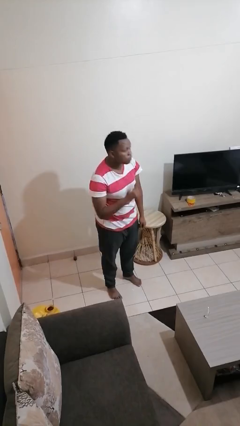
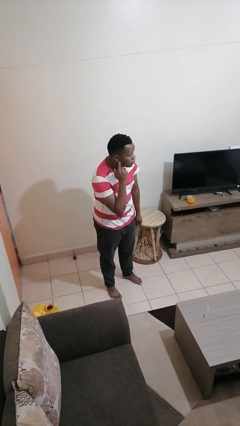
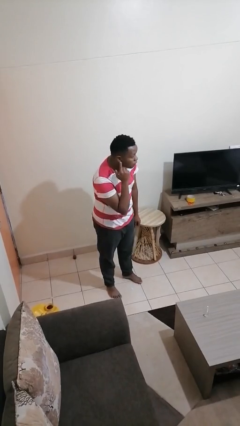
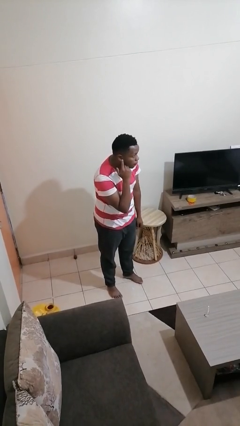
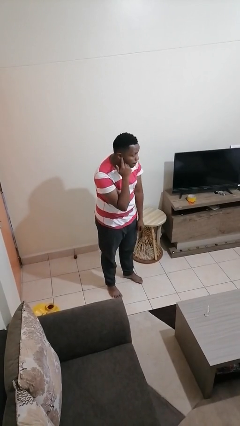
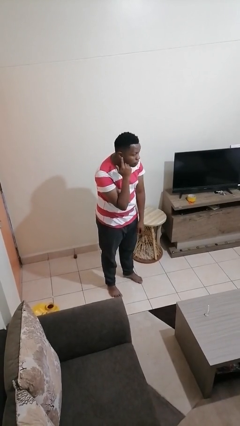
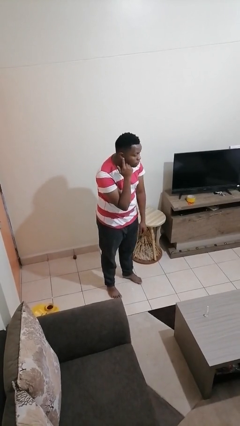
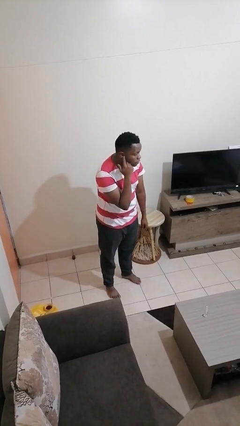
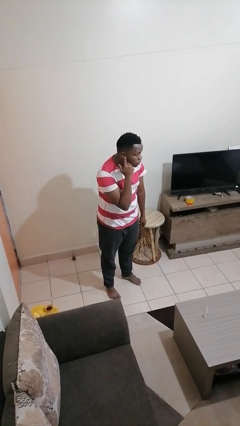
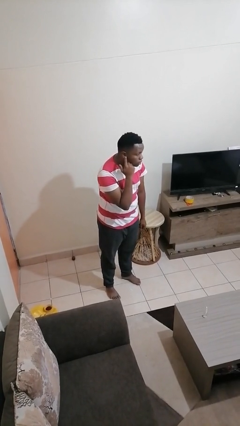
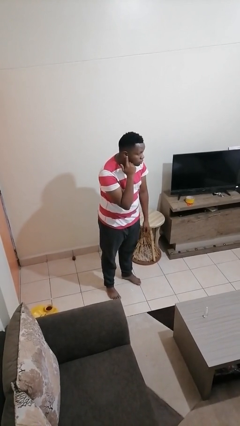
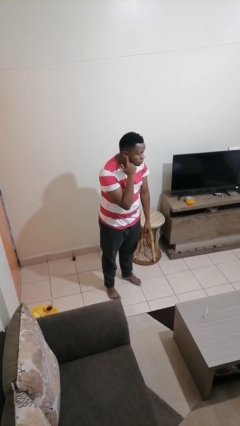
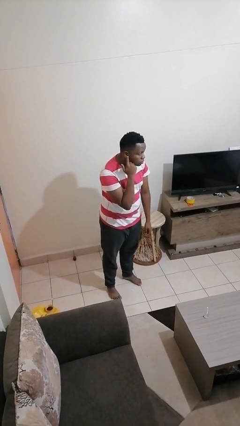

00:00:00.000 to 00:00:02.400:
person gestures listen closely

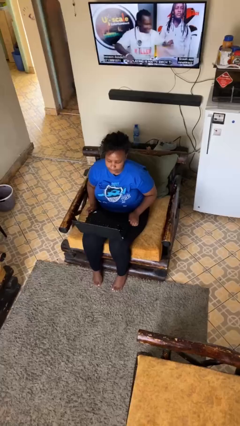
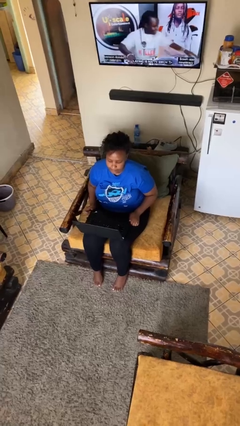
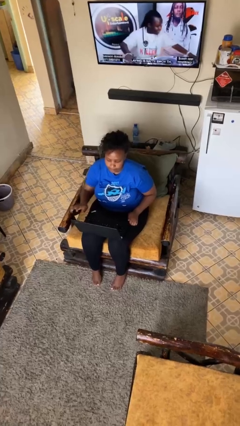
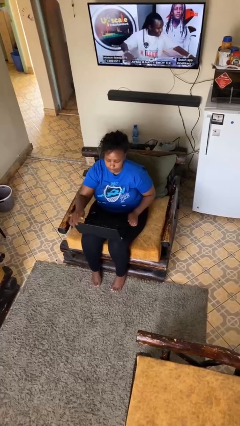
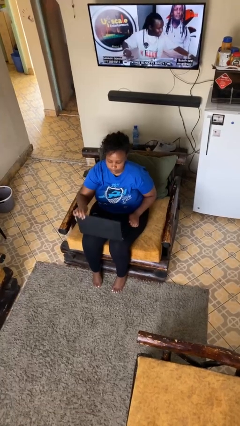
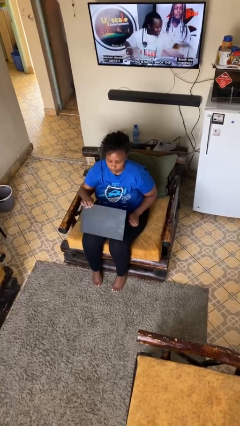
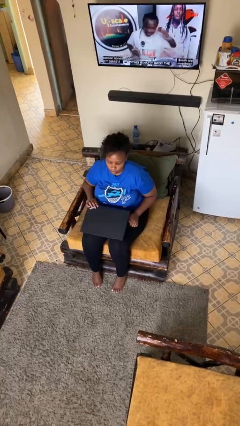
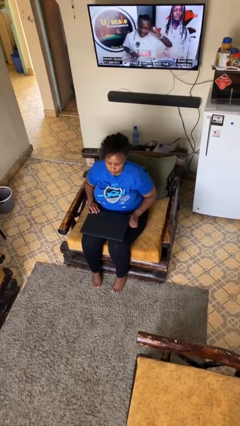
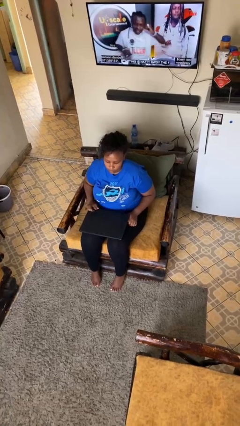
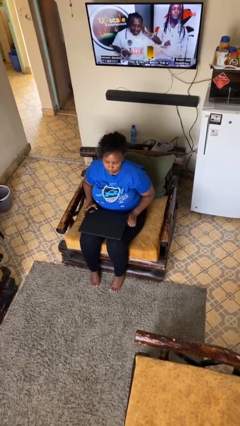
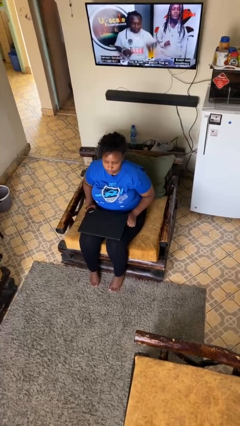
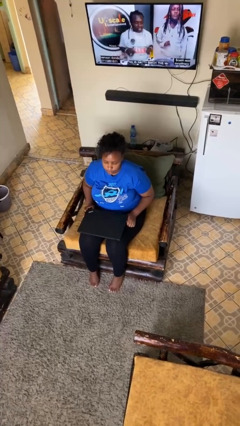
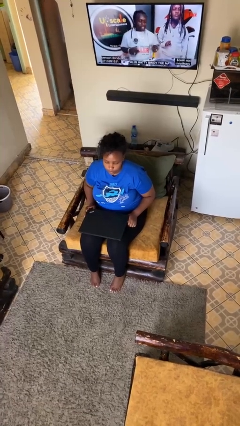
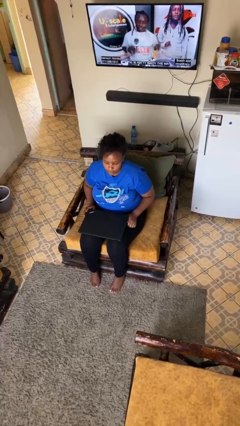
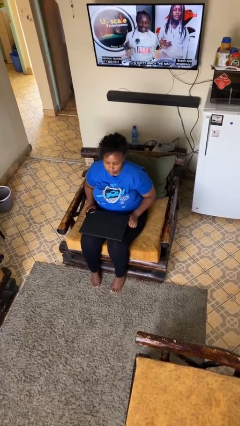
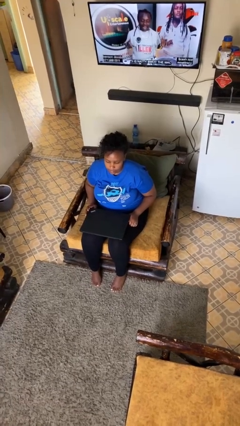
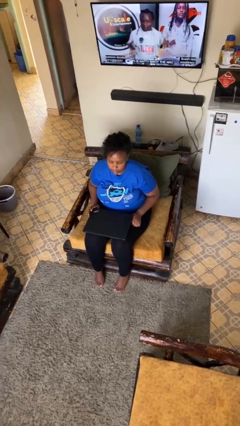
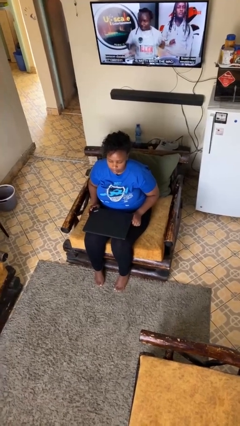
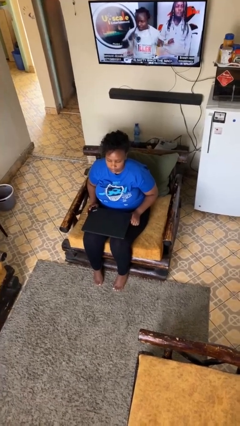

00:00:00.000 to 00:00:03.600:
person closes laptop

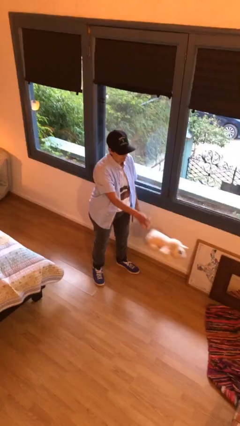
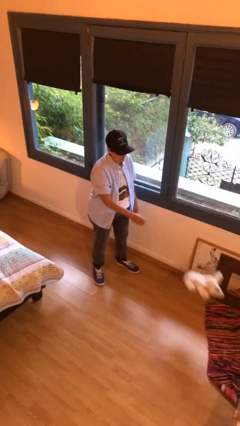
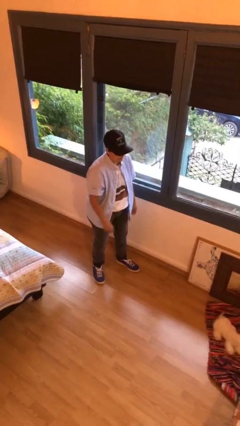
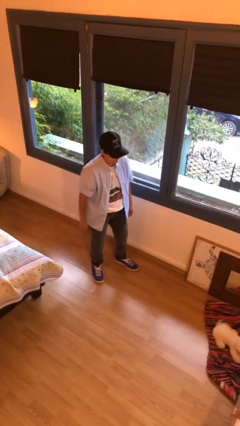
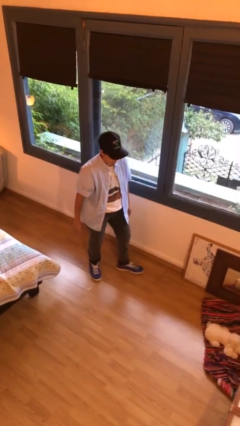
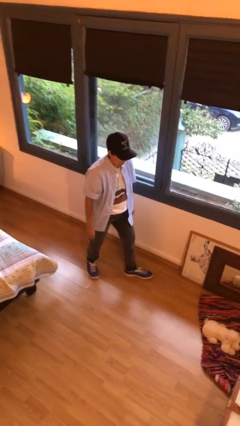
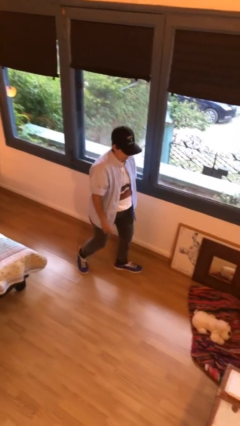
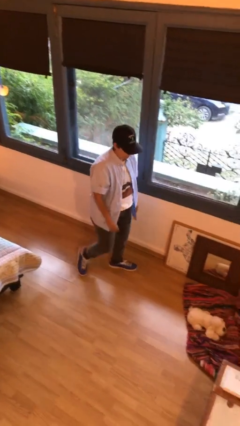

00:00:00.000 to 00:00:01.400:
person throws object to ground

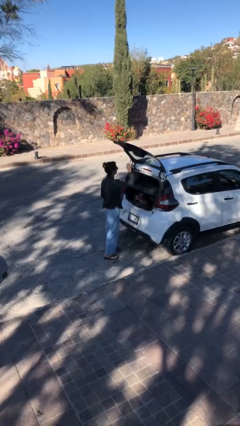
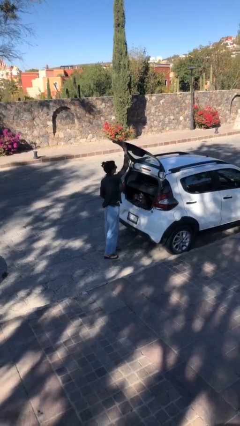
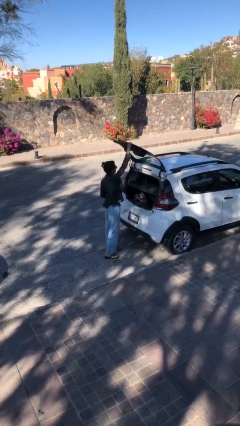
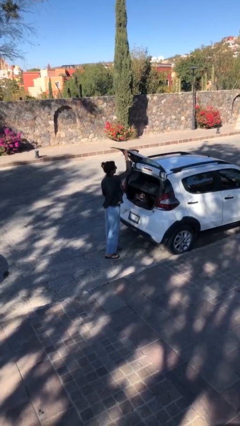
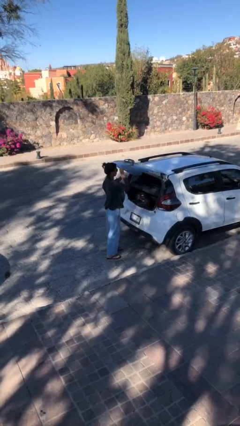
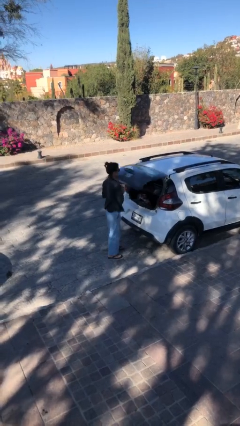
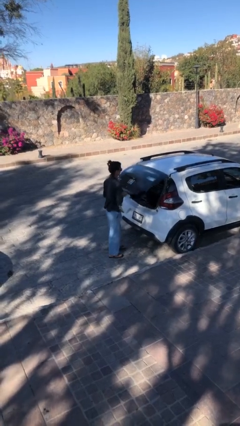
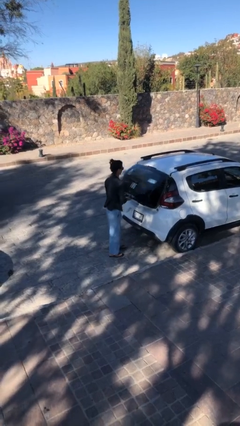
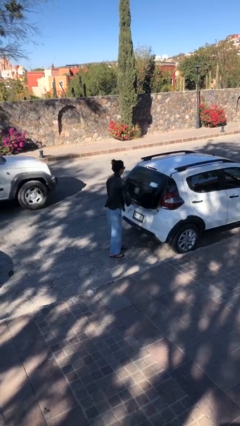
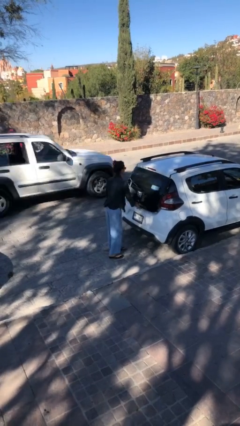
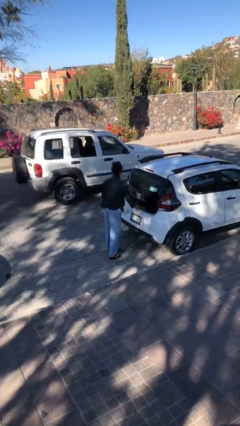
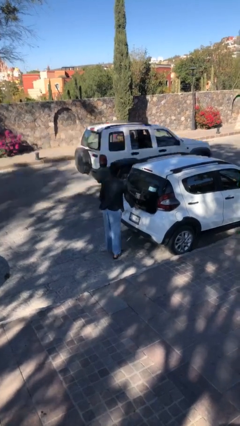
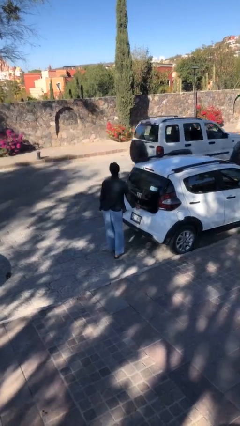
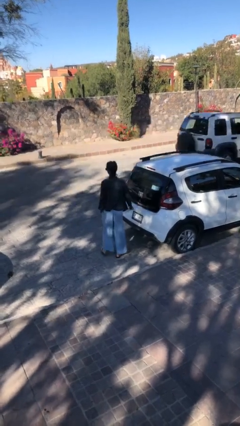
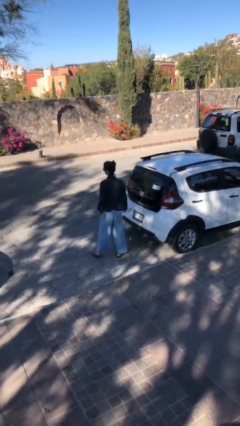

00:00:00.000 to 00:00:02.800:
person closes car trunk

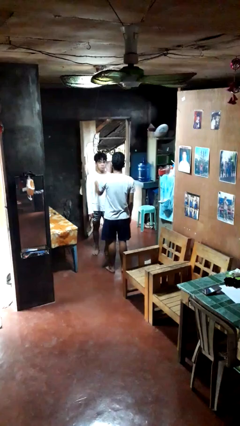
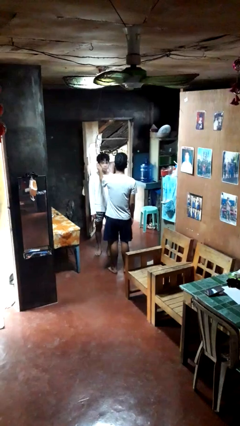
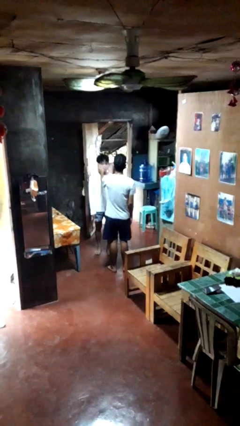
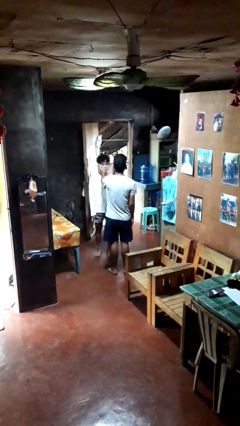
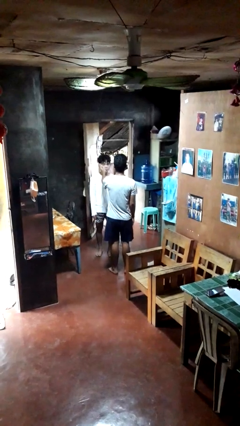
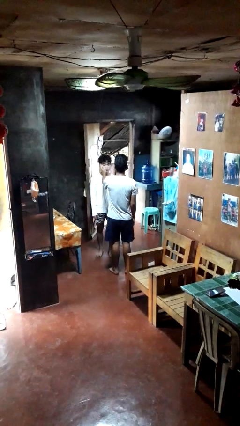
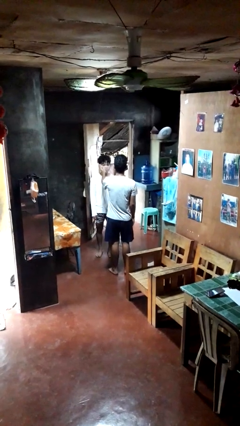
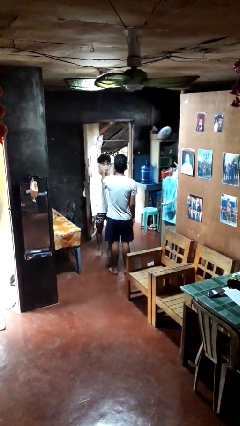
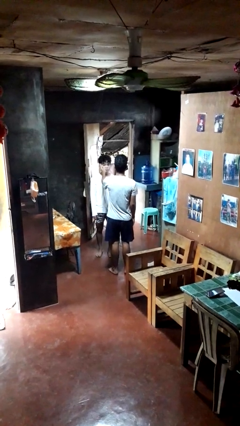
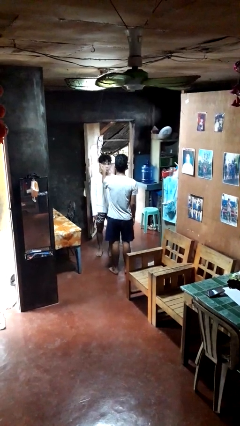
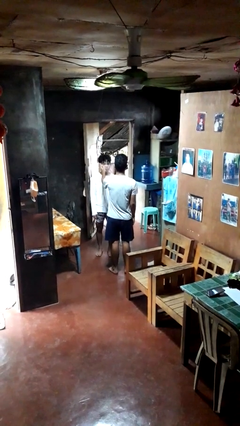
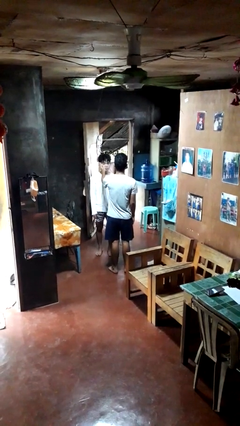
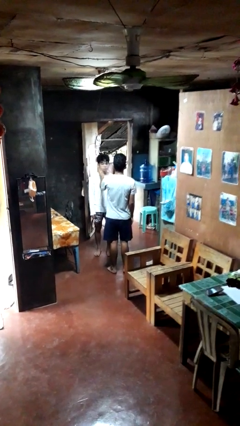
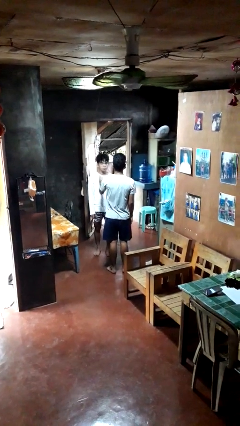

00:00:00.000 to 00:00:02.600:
person touches face of person

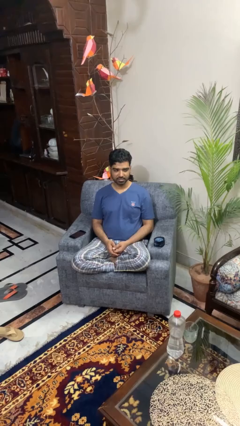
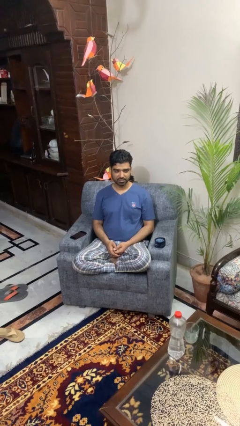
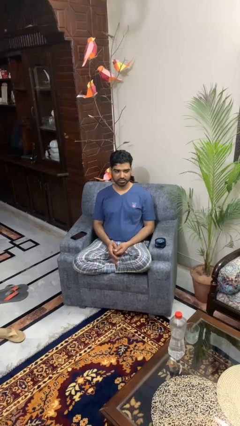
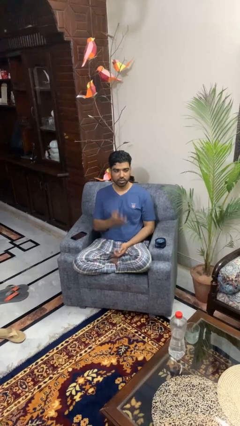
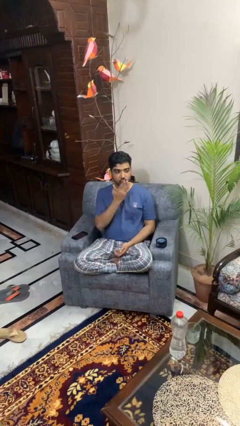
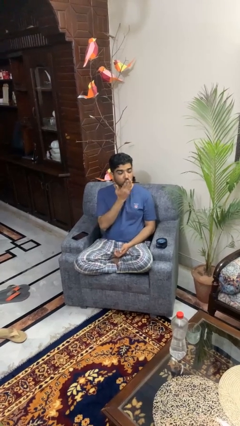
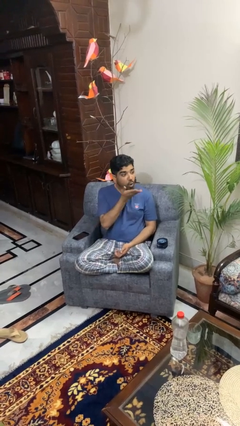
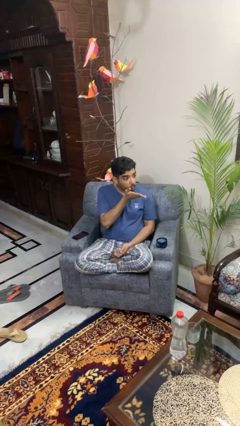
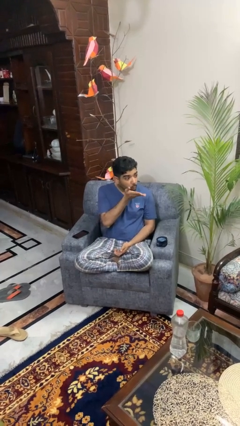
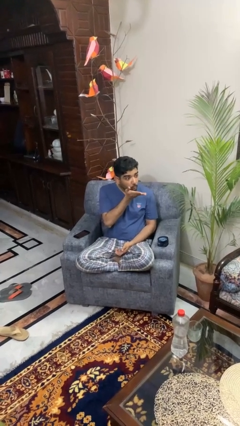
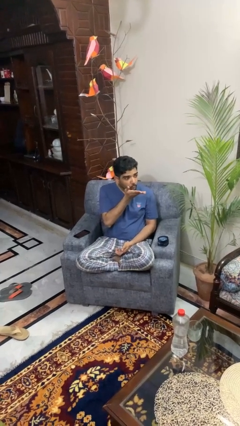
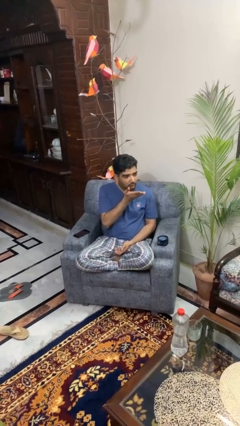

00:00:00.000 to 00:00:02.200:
person gestures blow kiss

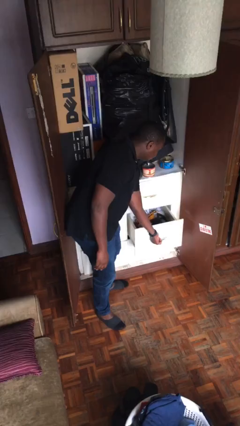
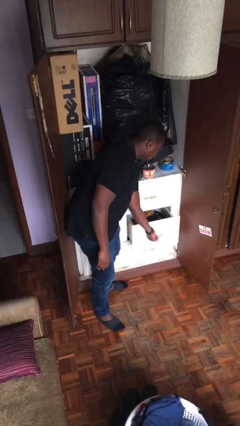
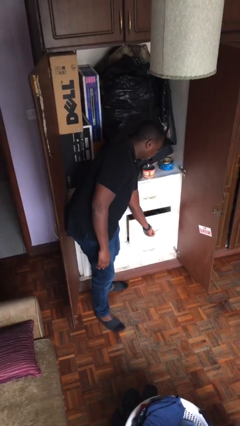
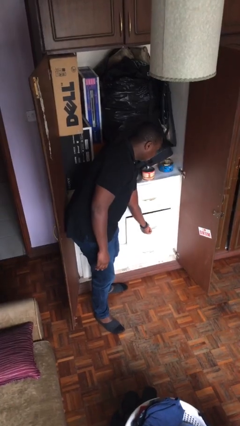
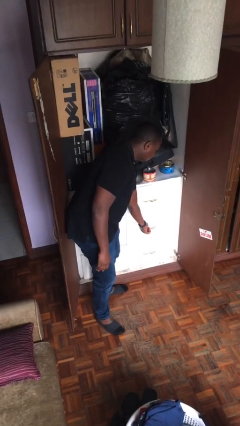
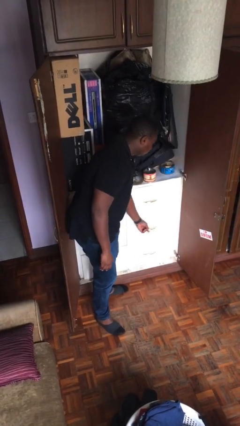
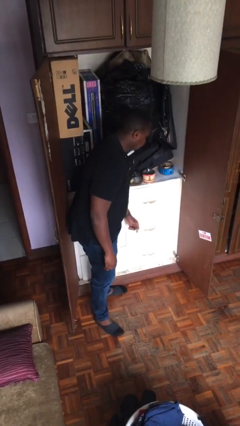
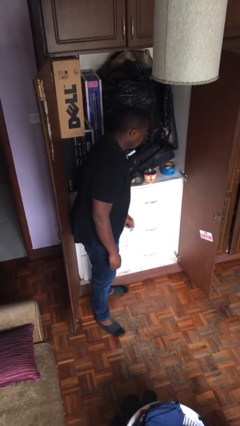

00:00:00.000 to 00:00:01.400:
person closes dresser drawer

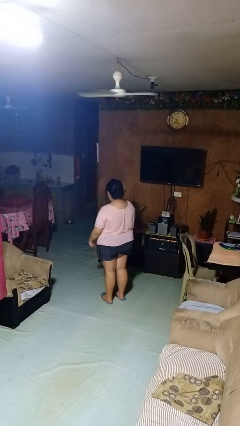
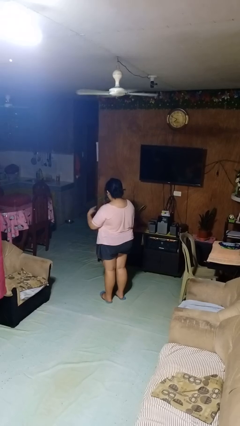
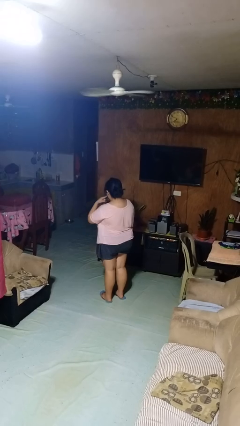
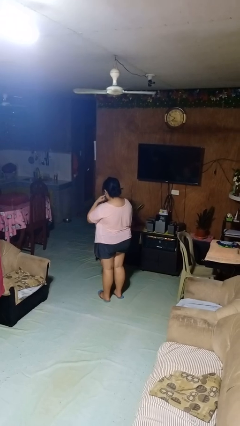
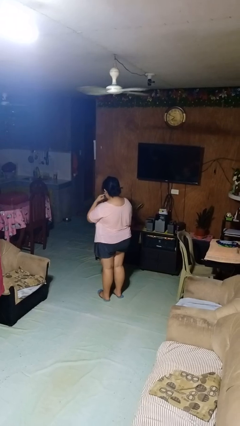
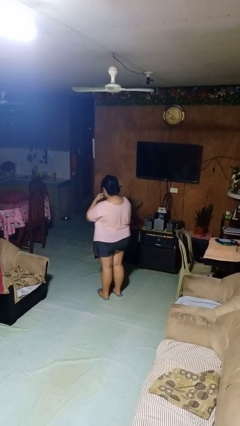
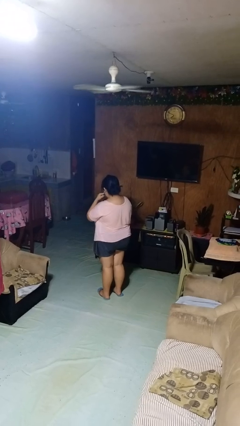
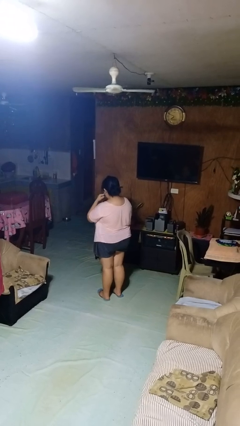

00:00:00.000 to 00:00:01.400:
person licks fingers
